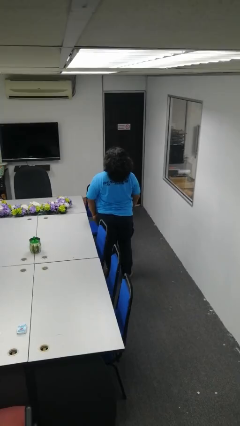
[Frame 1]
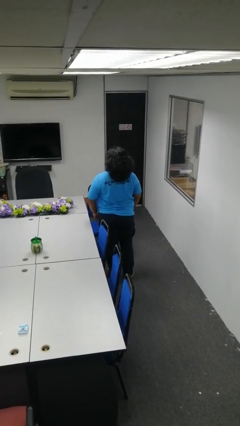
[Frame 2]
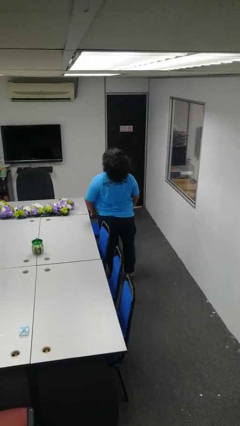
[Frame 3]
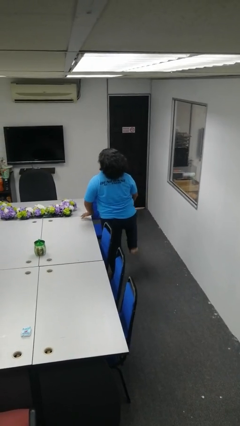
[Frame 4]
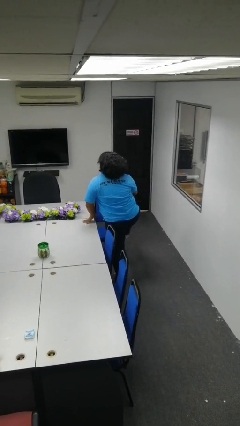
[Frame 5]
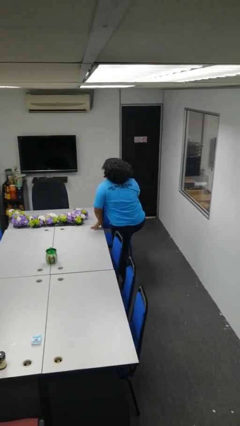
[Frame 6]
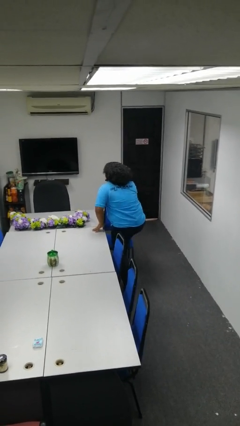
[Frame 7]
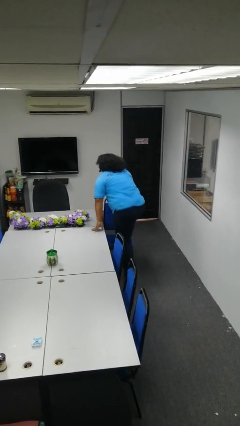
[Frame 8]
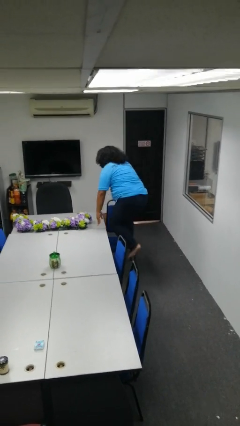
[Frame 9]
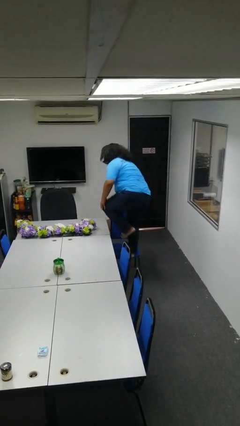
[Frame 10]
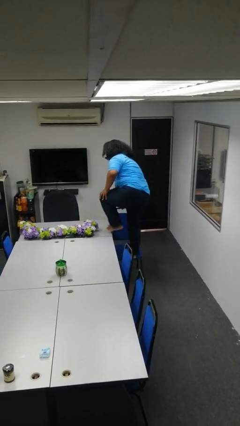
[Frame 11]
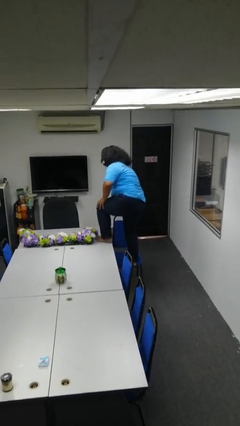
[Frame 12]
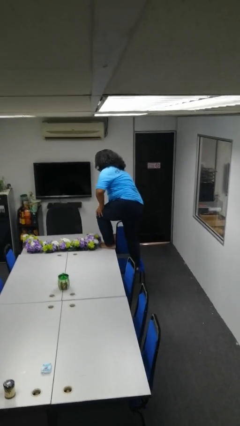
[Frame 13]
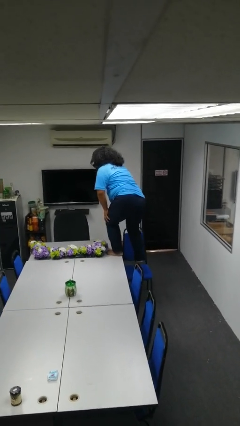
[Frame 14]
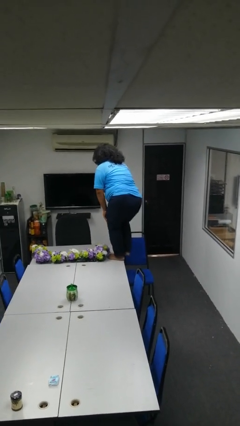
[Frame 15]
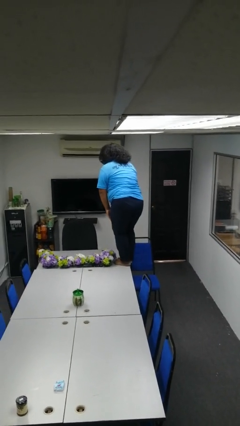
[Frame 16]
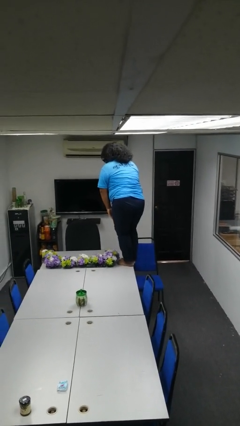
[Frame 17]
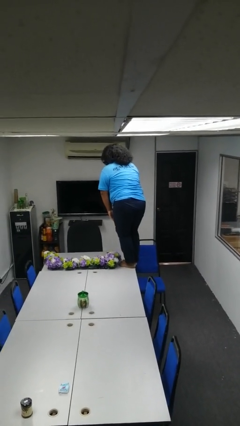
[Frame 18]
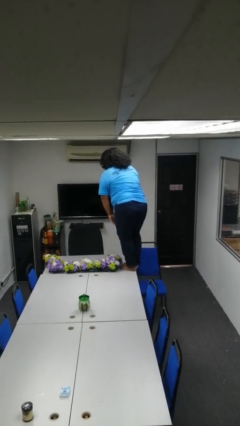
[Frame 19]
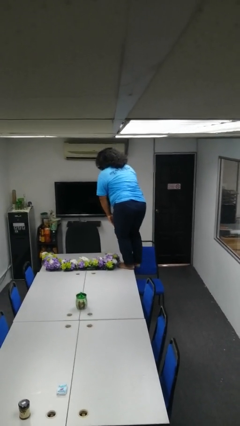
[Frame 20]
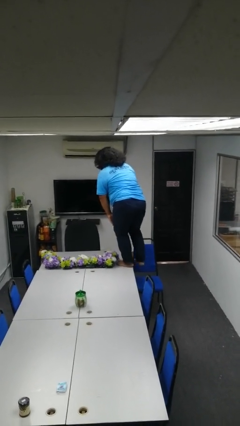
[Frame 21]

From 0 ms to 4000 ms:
person climbs on table

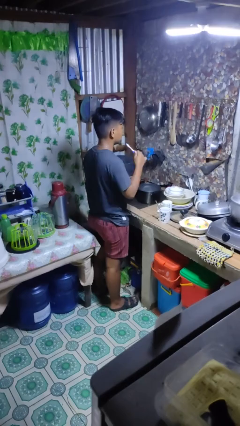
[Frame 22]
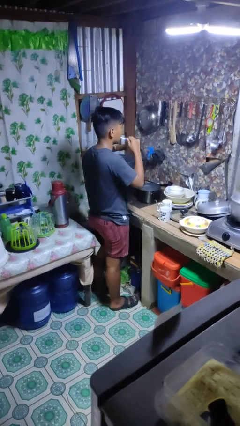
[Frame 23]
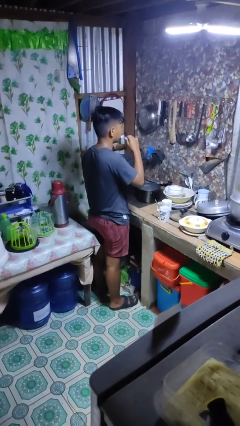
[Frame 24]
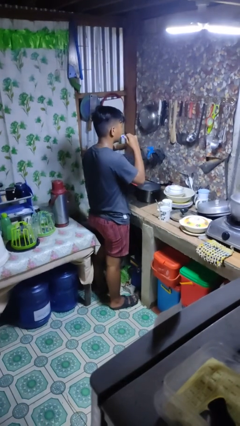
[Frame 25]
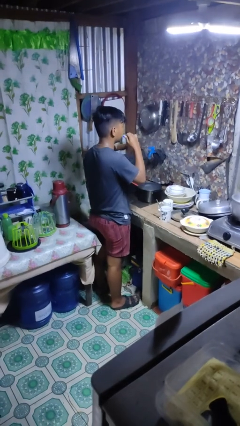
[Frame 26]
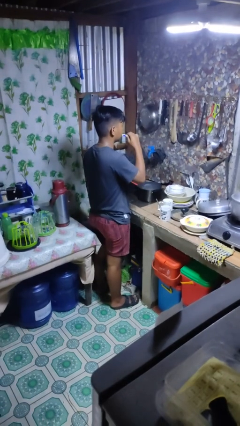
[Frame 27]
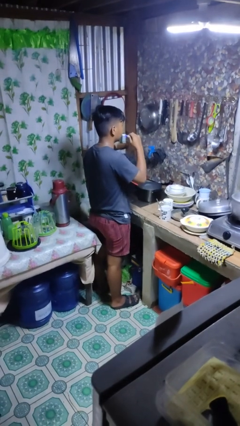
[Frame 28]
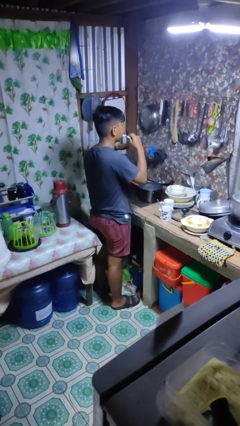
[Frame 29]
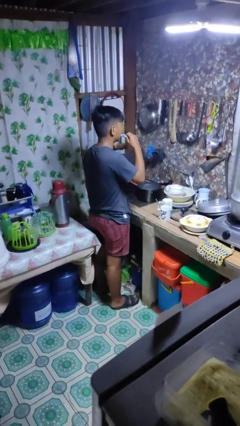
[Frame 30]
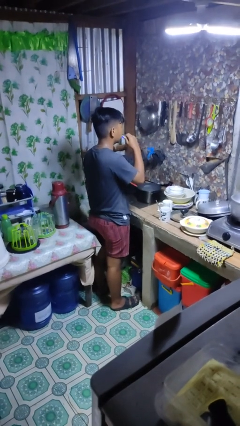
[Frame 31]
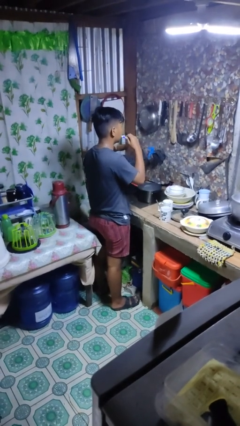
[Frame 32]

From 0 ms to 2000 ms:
person brushes teeth

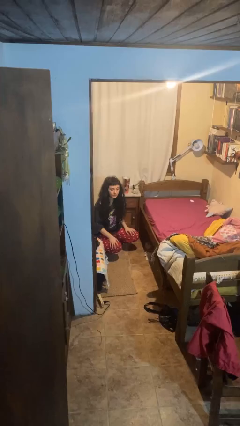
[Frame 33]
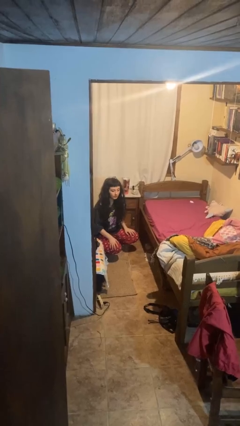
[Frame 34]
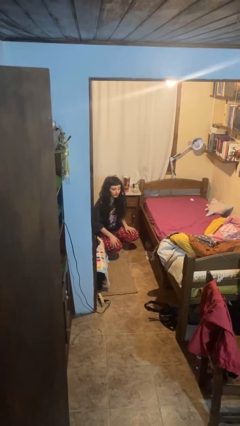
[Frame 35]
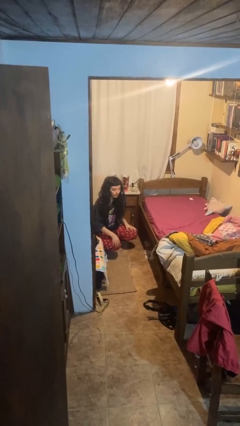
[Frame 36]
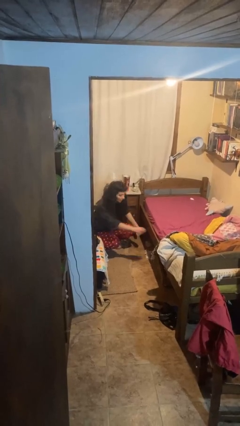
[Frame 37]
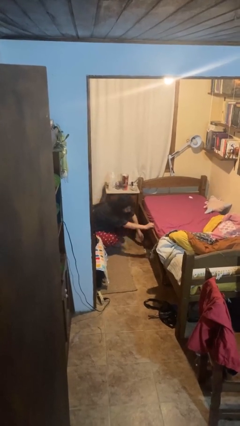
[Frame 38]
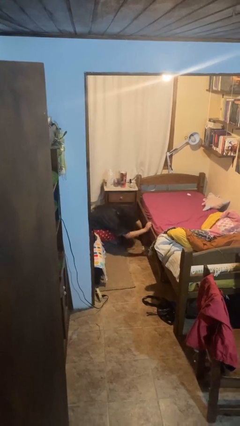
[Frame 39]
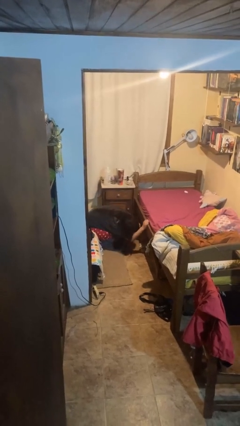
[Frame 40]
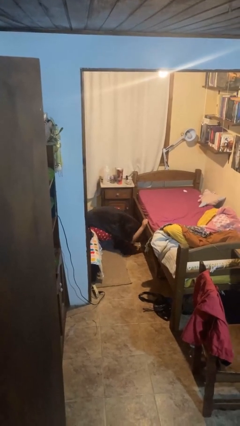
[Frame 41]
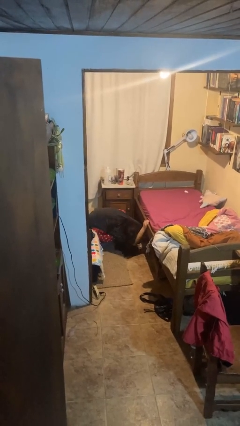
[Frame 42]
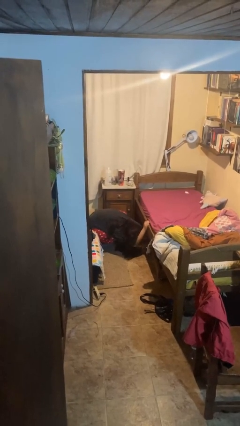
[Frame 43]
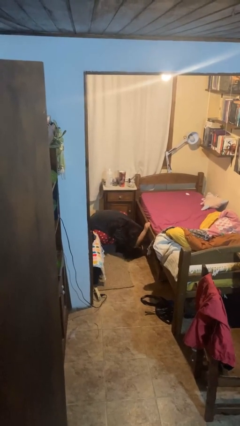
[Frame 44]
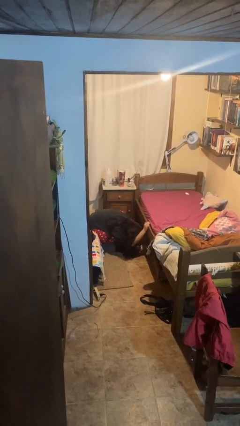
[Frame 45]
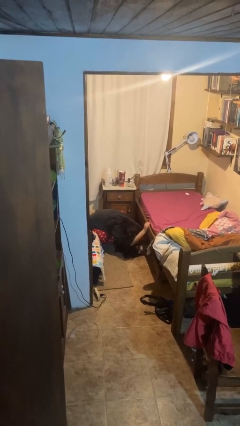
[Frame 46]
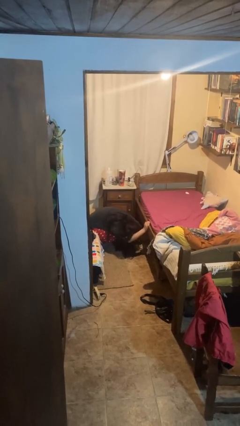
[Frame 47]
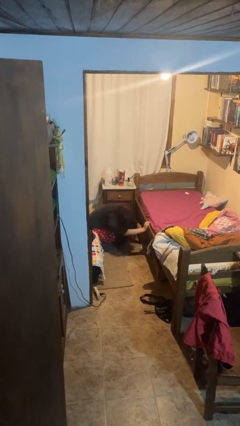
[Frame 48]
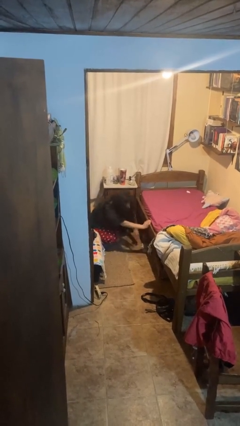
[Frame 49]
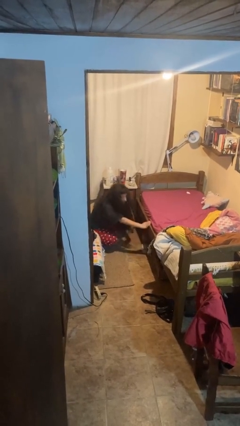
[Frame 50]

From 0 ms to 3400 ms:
person searches under bed

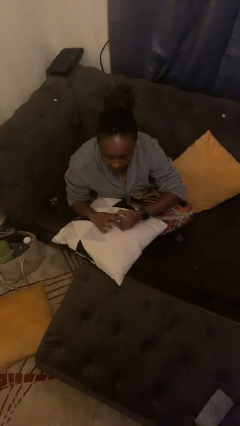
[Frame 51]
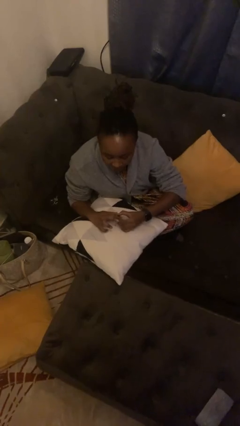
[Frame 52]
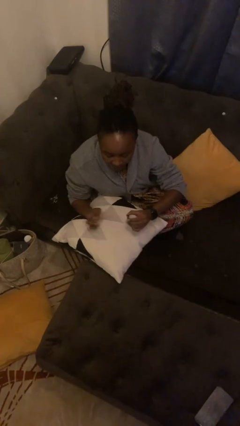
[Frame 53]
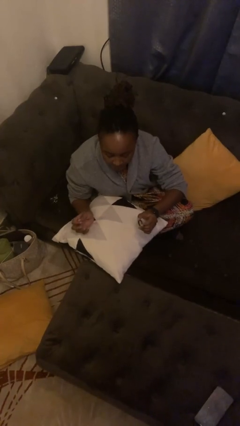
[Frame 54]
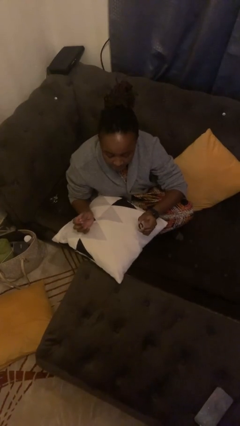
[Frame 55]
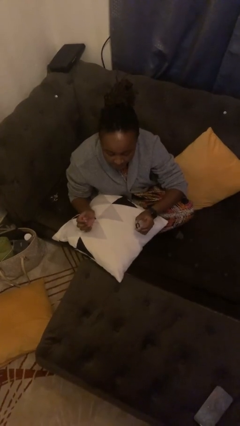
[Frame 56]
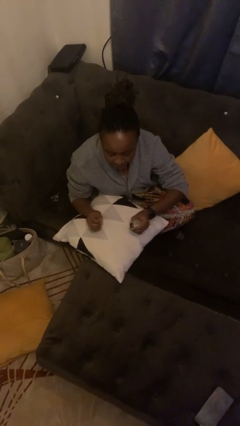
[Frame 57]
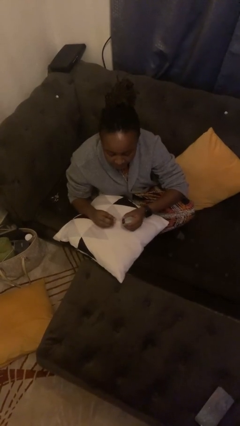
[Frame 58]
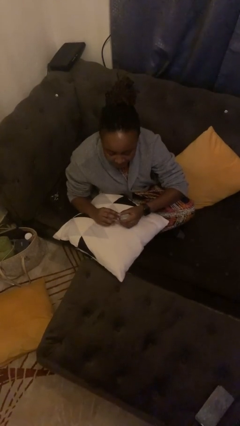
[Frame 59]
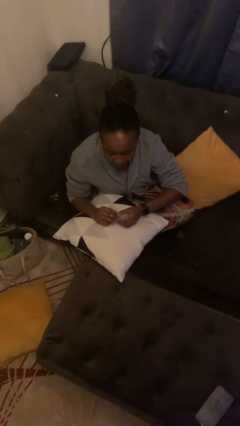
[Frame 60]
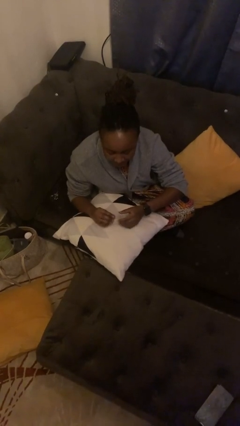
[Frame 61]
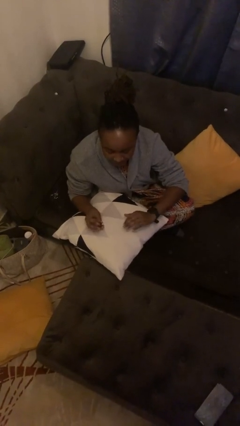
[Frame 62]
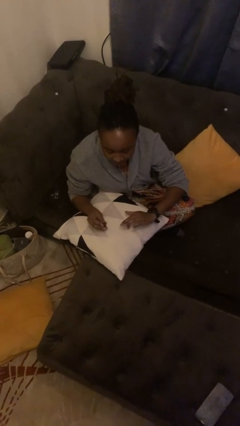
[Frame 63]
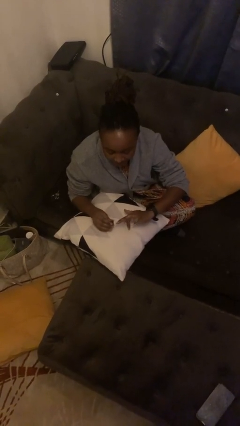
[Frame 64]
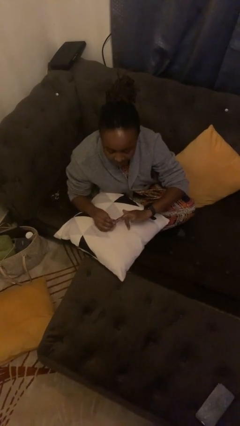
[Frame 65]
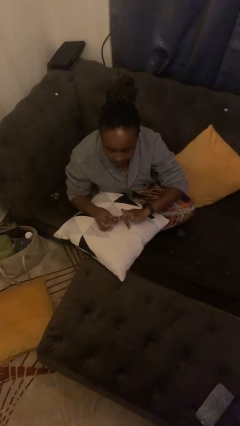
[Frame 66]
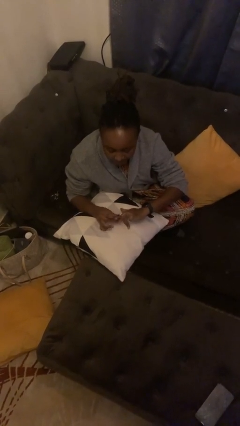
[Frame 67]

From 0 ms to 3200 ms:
person takes off ring

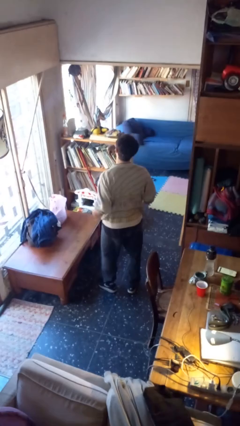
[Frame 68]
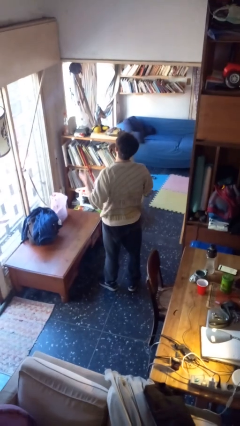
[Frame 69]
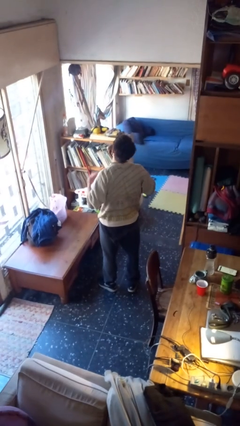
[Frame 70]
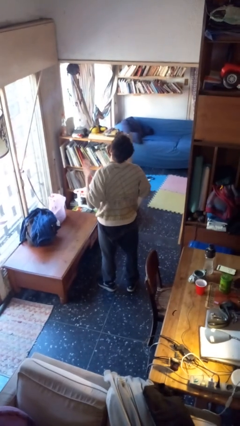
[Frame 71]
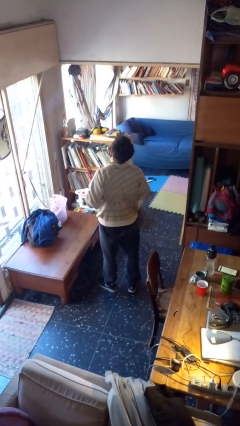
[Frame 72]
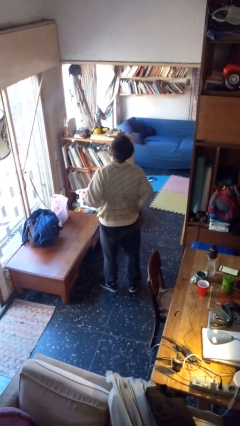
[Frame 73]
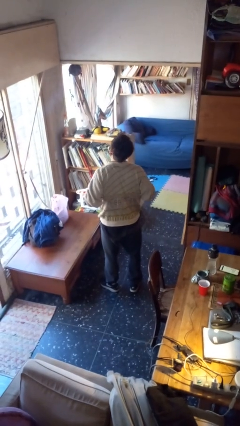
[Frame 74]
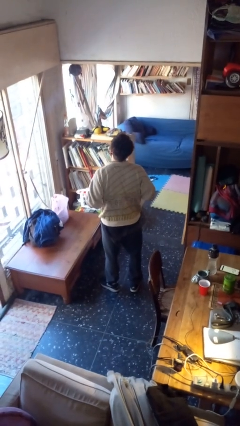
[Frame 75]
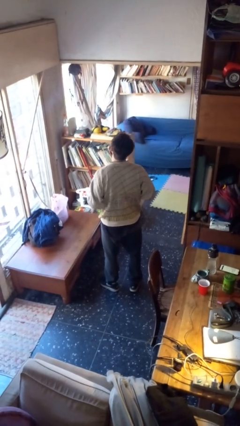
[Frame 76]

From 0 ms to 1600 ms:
person drums on chest

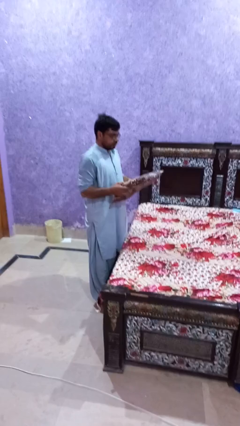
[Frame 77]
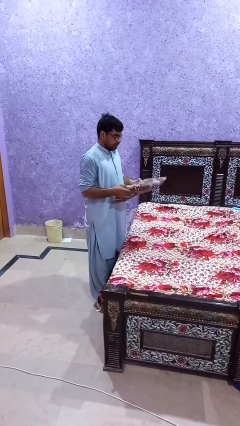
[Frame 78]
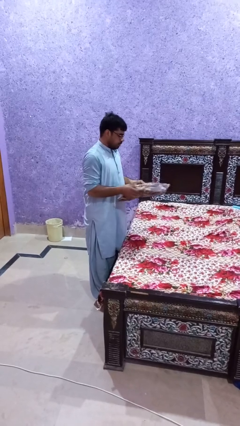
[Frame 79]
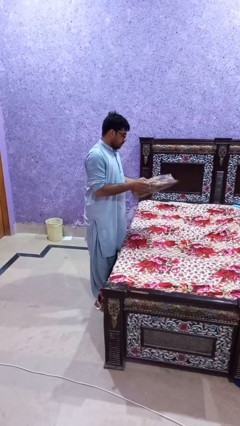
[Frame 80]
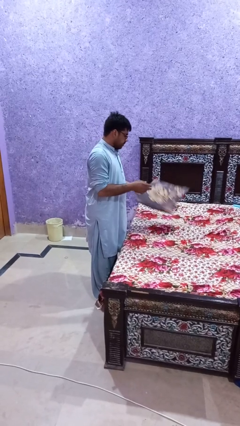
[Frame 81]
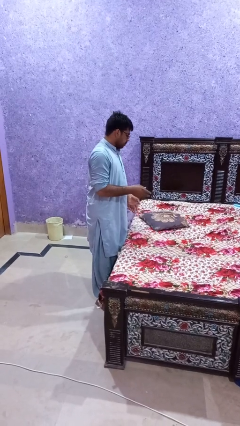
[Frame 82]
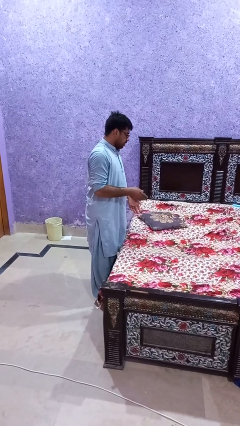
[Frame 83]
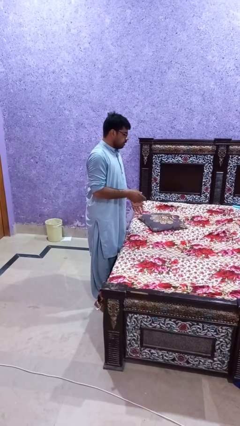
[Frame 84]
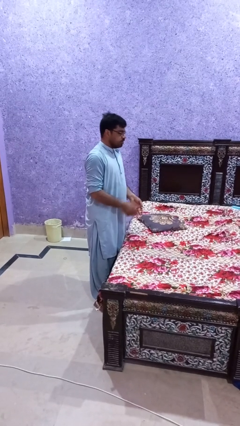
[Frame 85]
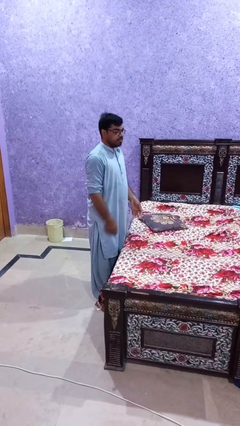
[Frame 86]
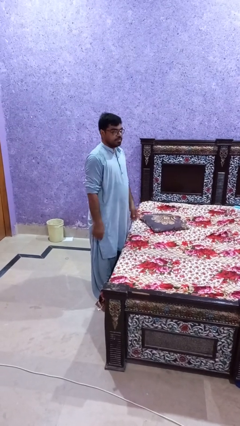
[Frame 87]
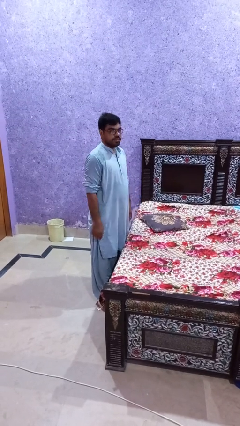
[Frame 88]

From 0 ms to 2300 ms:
person puts down object on bed

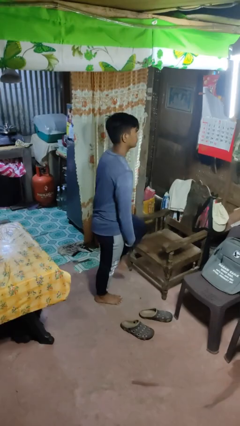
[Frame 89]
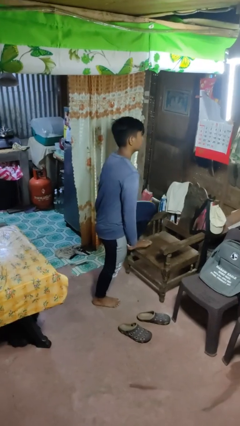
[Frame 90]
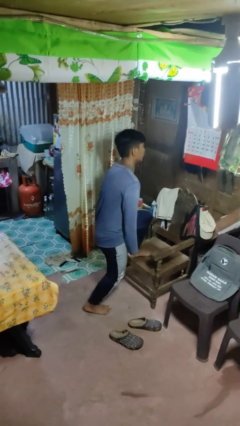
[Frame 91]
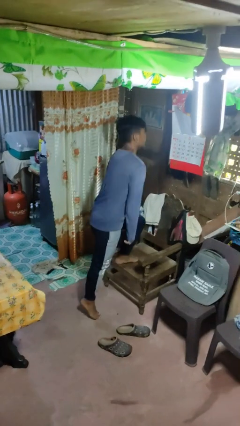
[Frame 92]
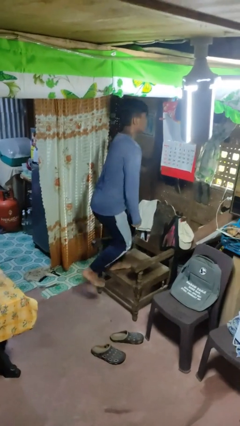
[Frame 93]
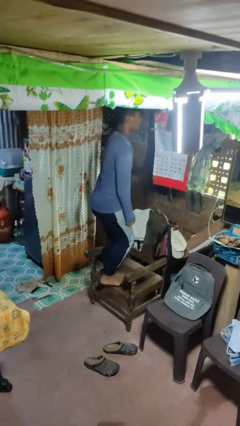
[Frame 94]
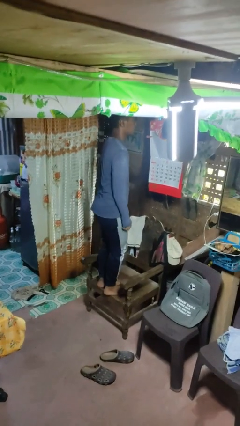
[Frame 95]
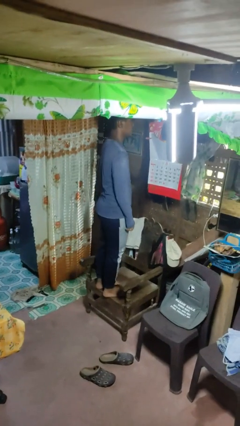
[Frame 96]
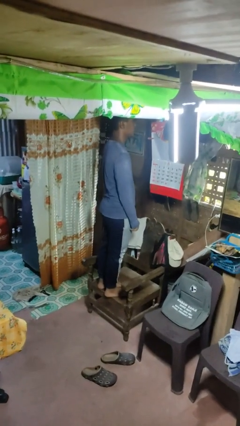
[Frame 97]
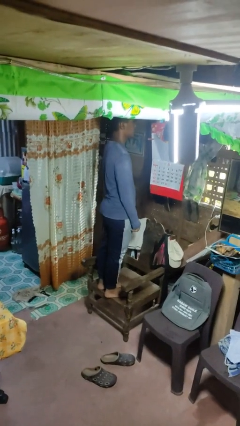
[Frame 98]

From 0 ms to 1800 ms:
person climbs on chair
